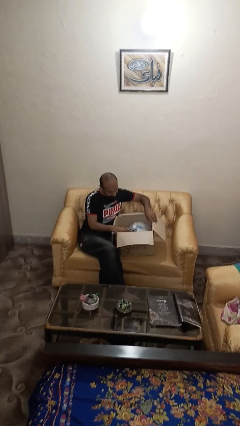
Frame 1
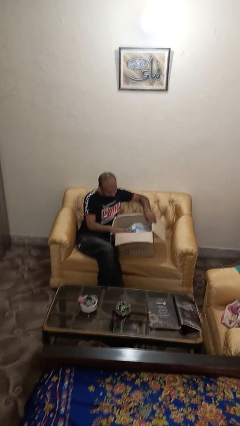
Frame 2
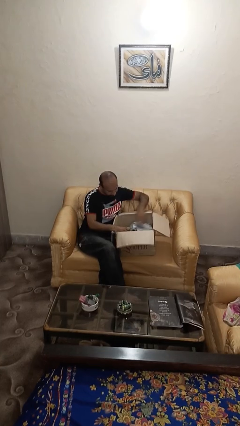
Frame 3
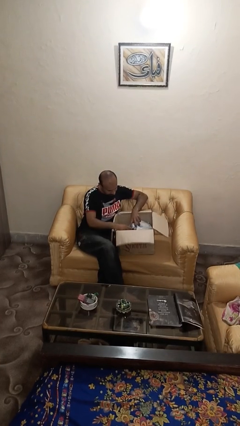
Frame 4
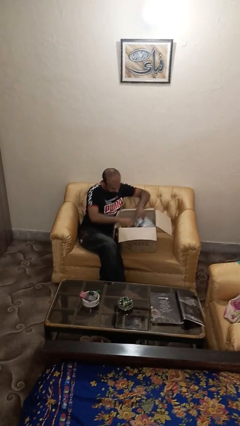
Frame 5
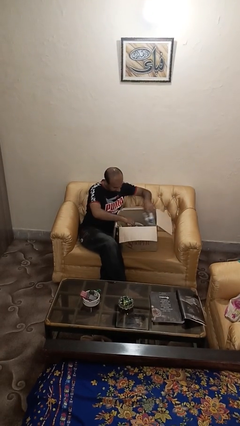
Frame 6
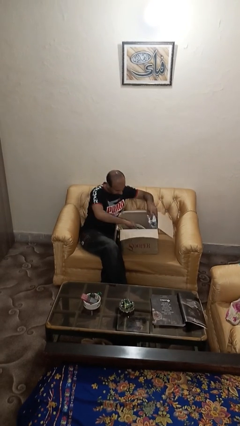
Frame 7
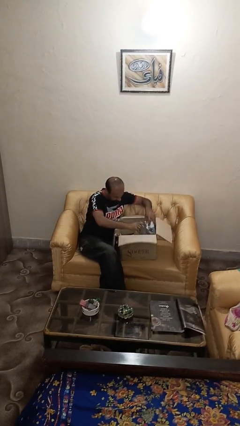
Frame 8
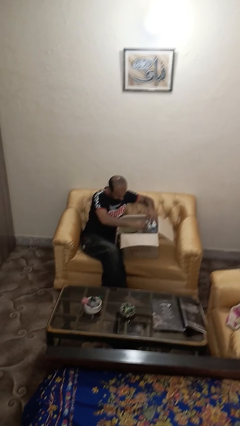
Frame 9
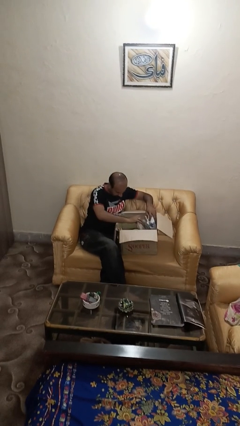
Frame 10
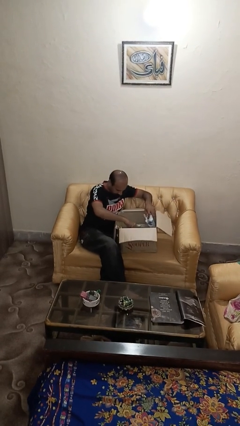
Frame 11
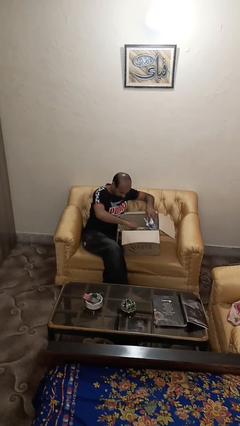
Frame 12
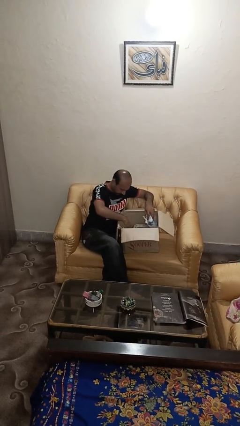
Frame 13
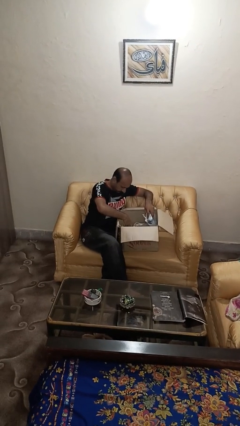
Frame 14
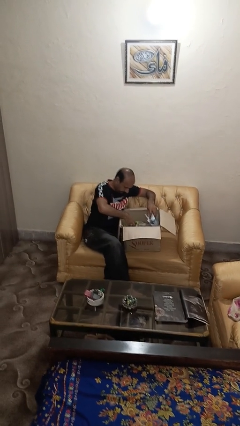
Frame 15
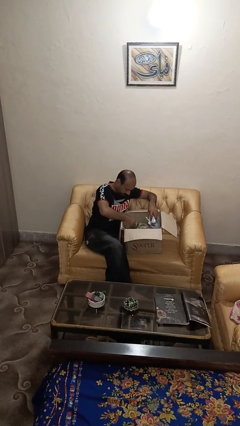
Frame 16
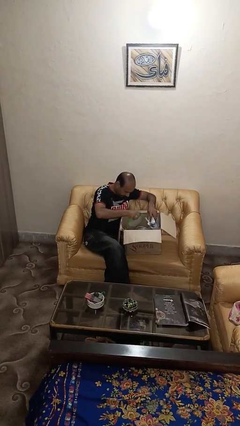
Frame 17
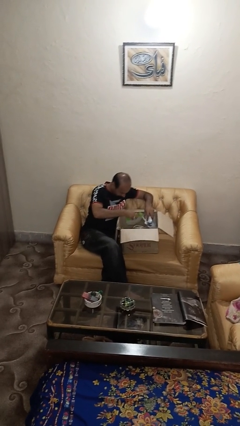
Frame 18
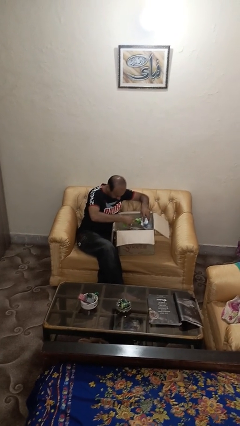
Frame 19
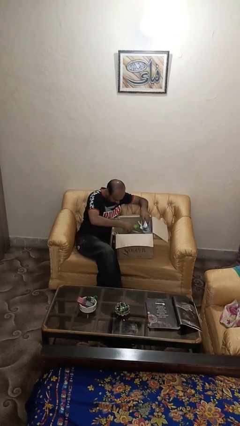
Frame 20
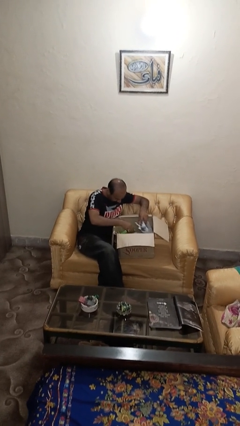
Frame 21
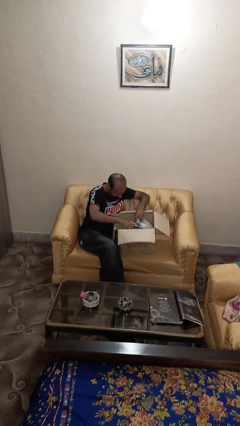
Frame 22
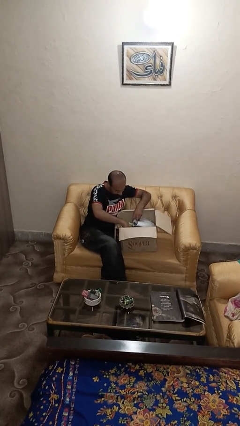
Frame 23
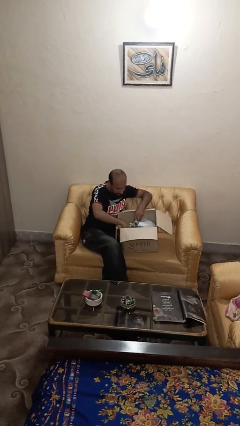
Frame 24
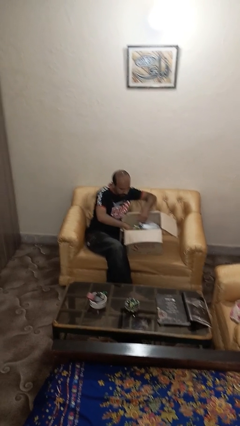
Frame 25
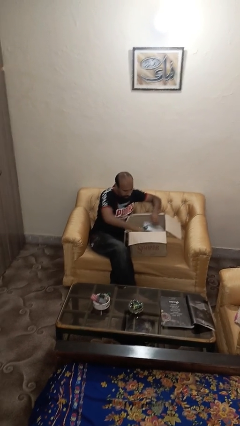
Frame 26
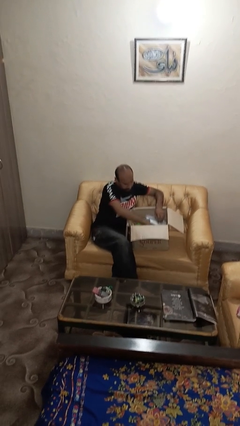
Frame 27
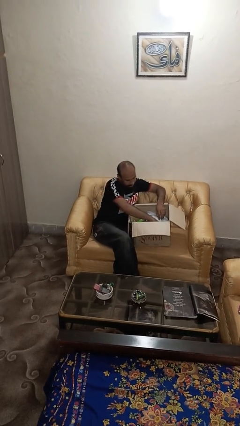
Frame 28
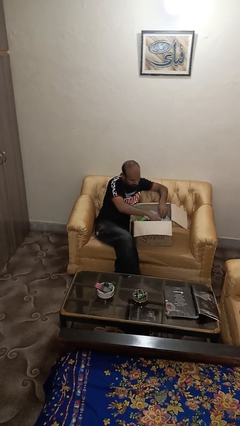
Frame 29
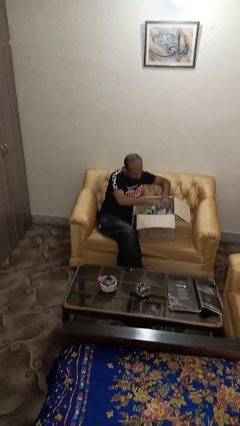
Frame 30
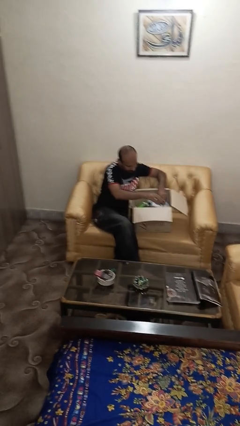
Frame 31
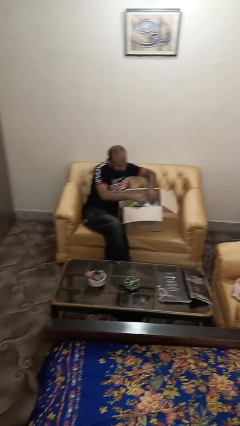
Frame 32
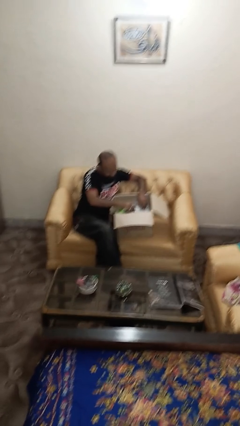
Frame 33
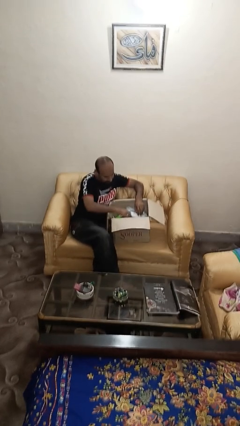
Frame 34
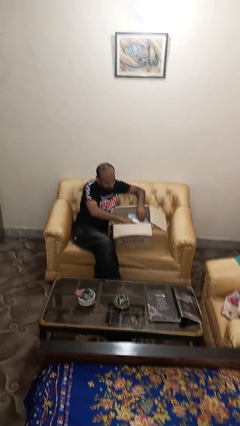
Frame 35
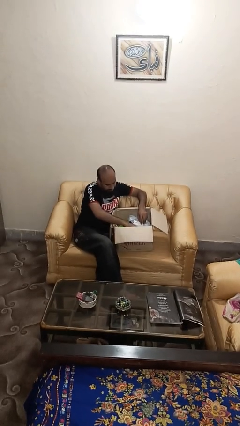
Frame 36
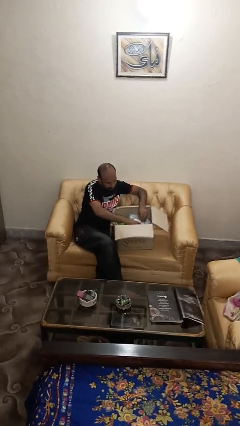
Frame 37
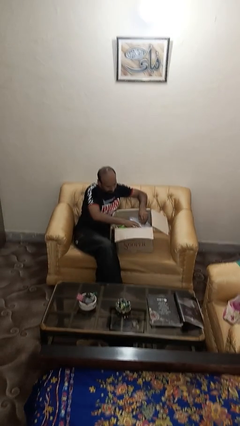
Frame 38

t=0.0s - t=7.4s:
person searches in box

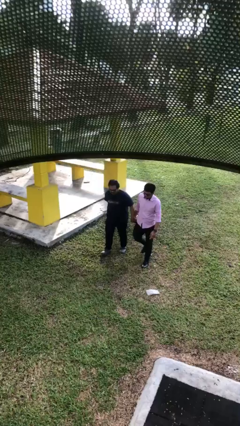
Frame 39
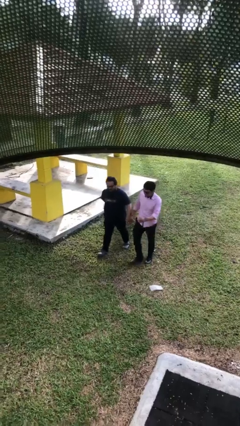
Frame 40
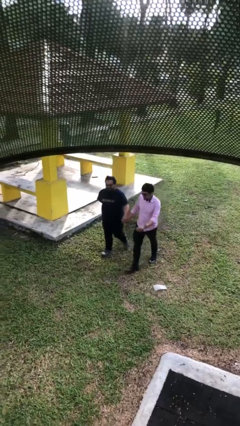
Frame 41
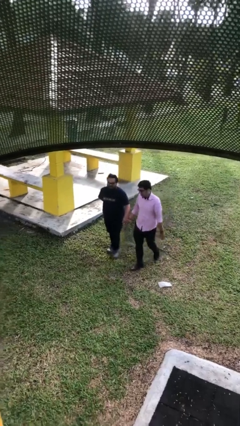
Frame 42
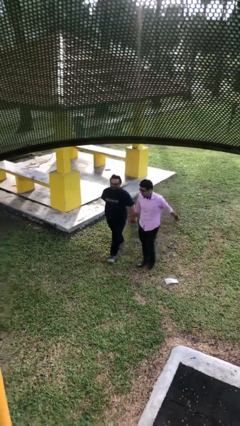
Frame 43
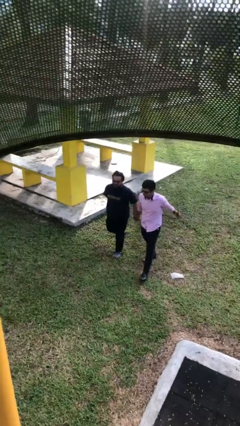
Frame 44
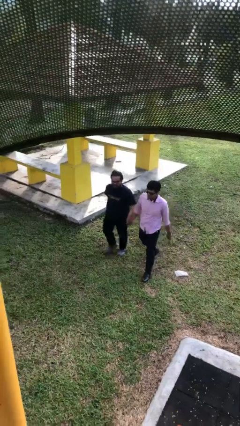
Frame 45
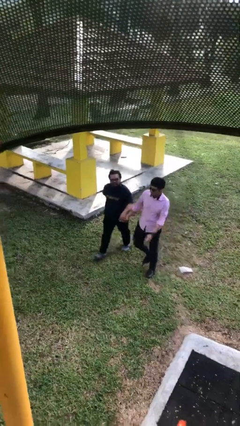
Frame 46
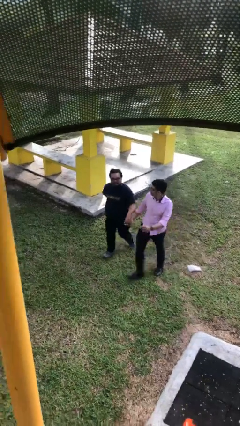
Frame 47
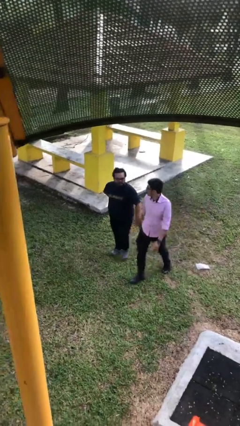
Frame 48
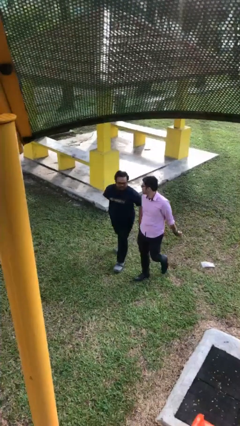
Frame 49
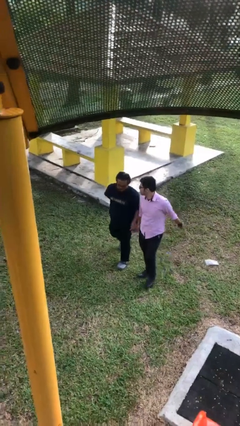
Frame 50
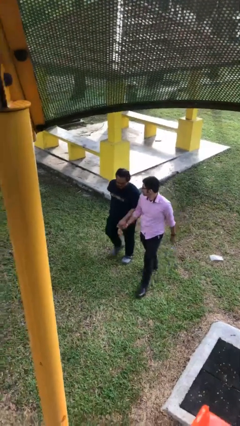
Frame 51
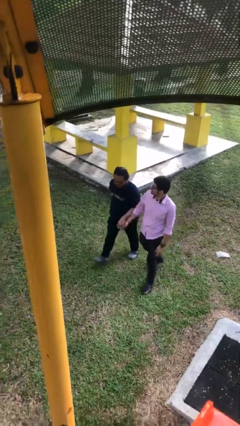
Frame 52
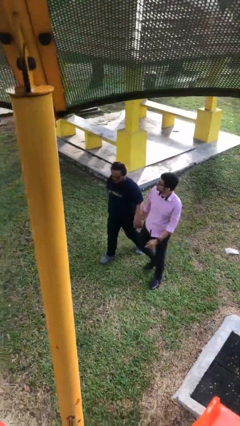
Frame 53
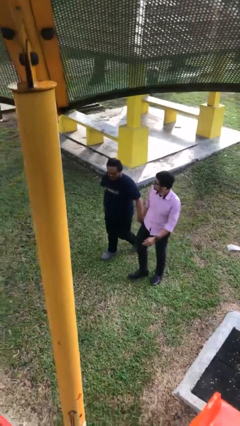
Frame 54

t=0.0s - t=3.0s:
person holds hand

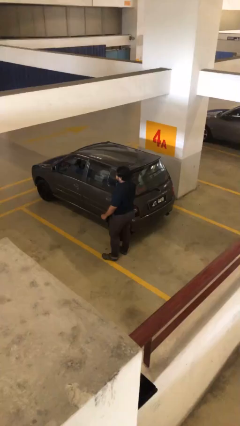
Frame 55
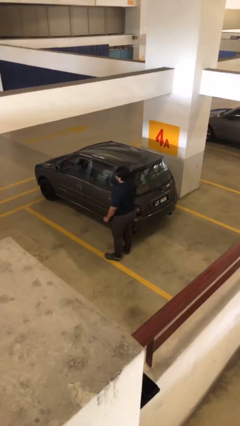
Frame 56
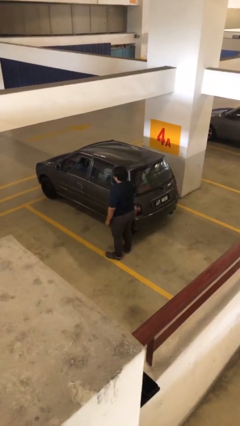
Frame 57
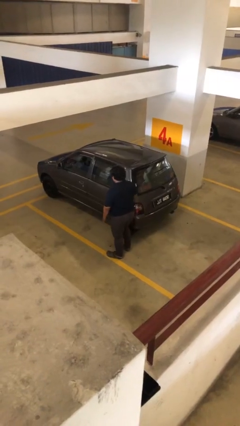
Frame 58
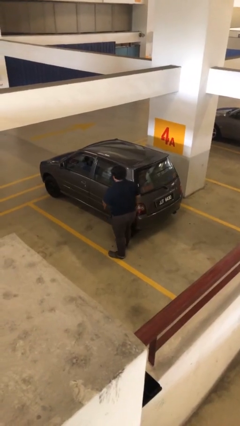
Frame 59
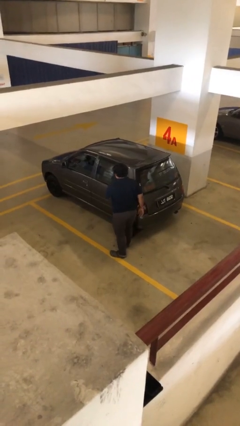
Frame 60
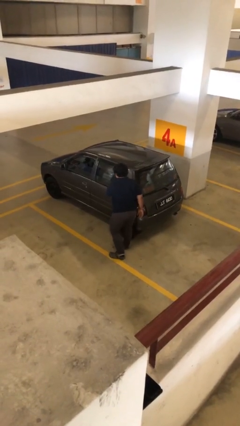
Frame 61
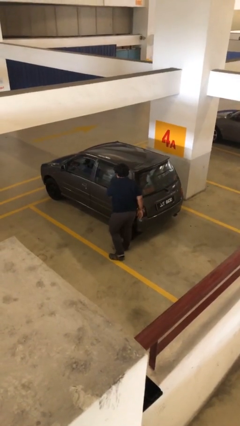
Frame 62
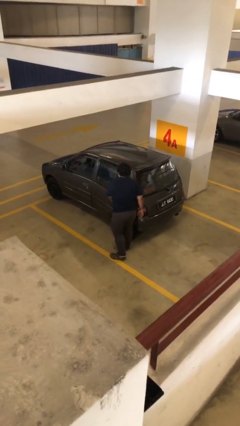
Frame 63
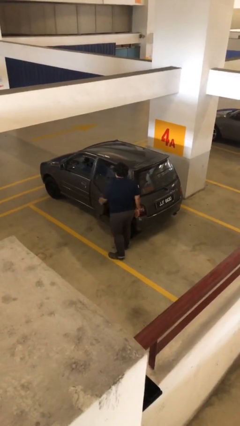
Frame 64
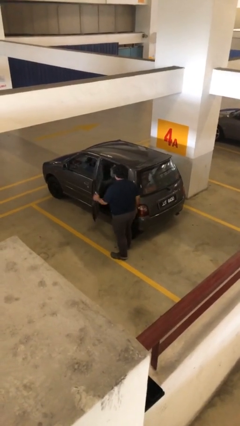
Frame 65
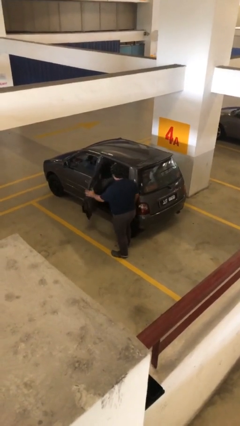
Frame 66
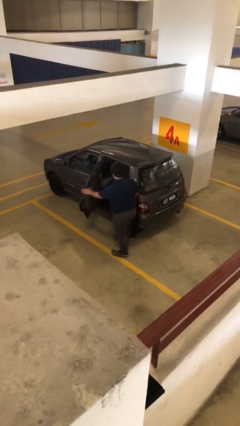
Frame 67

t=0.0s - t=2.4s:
person opens car door

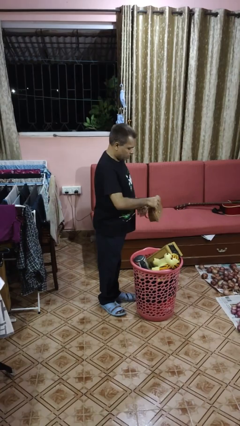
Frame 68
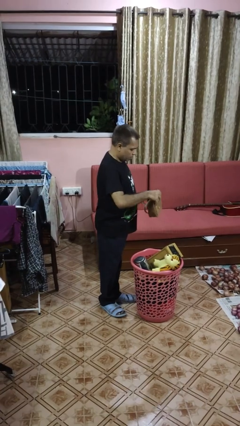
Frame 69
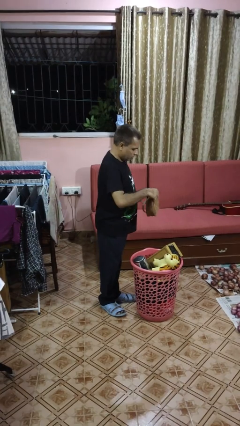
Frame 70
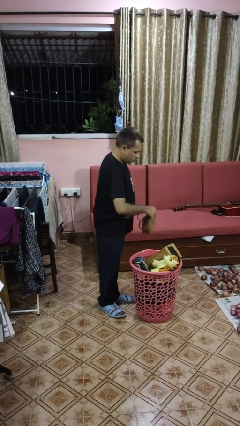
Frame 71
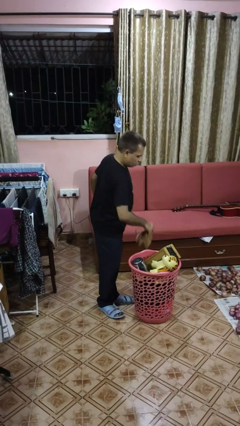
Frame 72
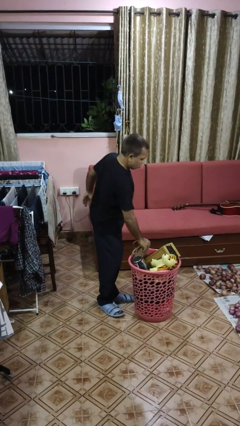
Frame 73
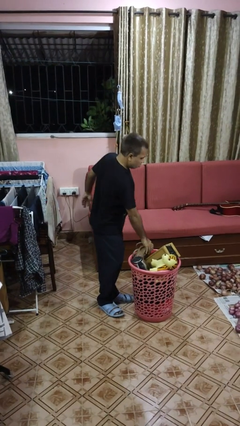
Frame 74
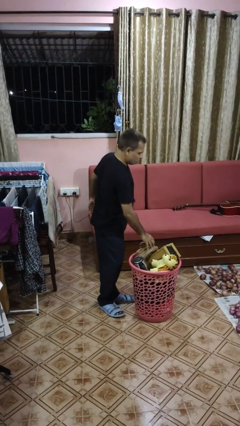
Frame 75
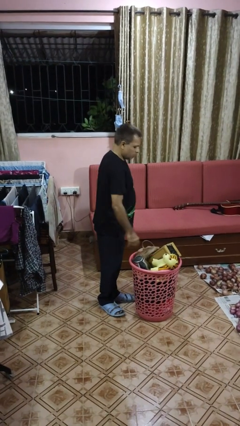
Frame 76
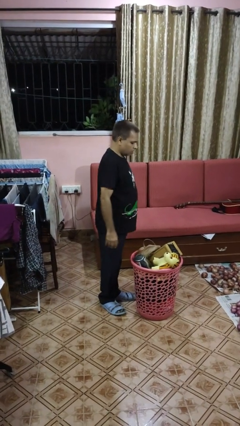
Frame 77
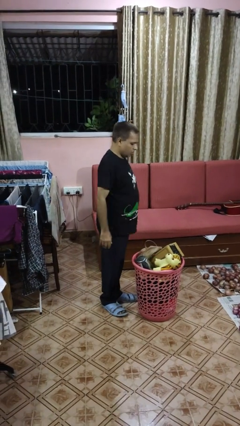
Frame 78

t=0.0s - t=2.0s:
person puts object into basket

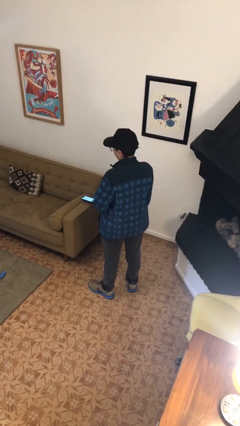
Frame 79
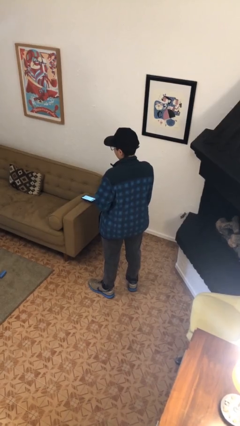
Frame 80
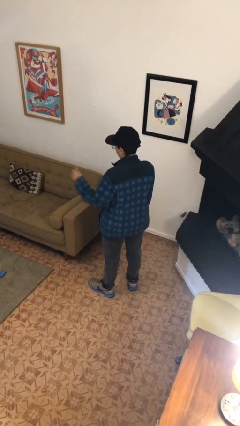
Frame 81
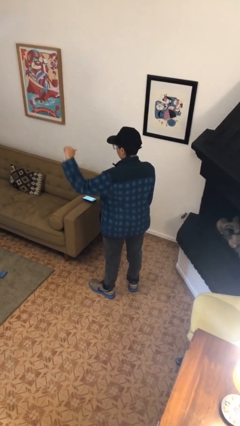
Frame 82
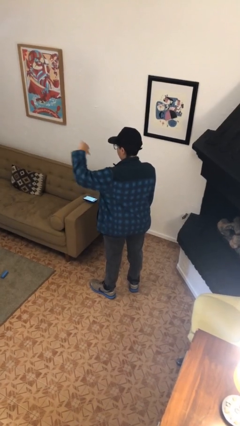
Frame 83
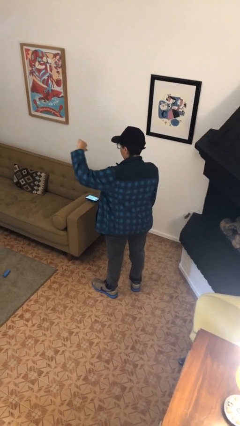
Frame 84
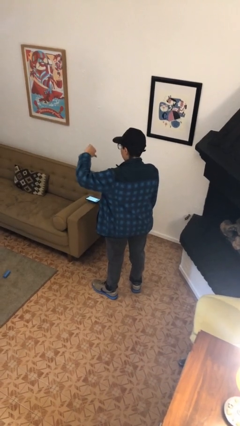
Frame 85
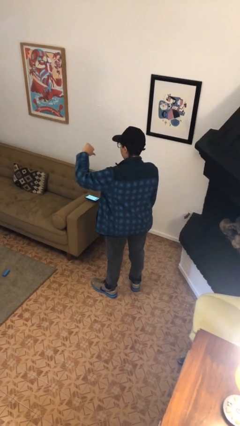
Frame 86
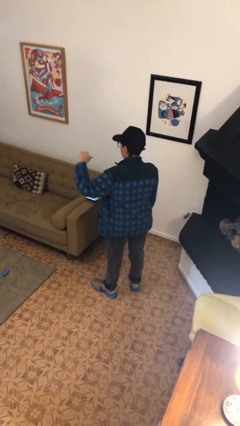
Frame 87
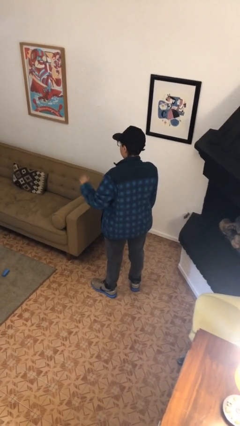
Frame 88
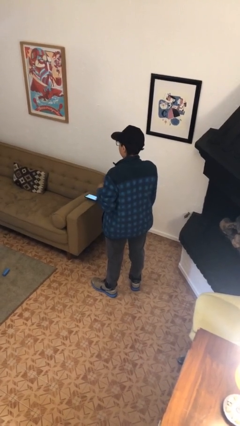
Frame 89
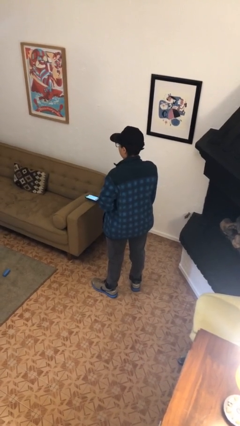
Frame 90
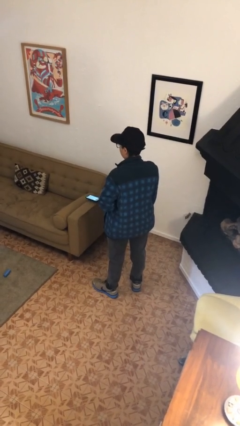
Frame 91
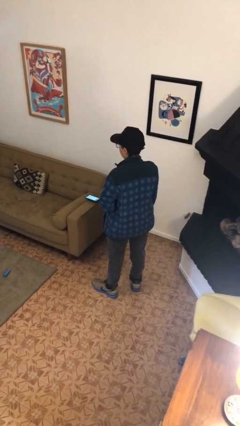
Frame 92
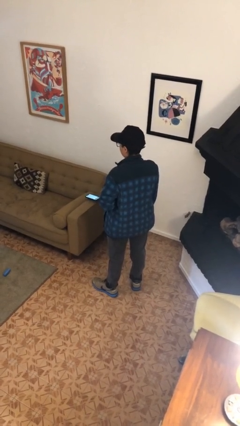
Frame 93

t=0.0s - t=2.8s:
person gestures thumbs down
